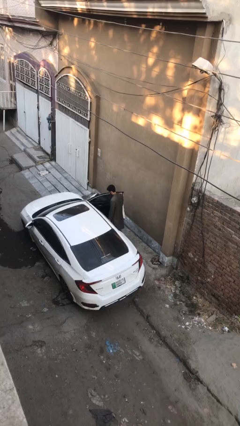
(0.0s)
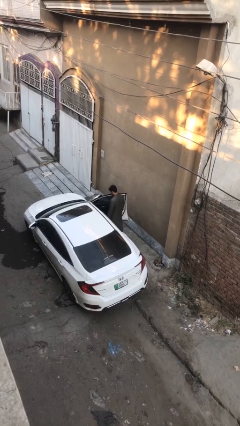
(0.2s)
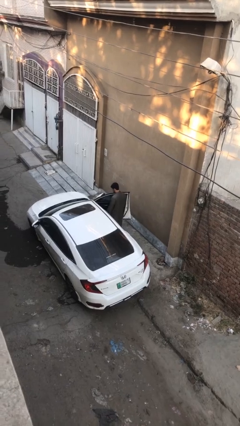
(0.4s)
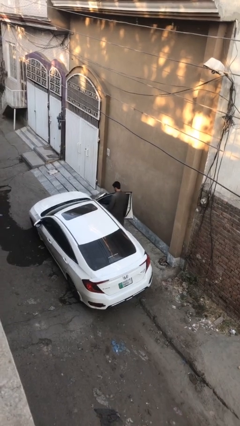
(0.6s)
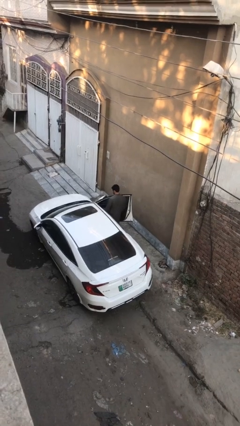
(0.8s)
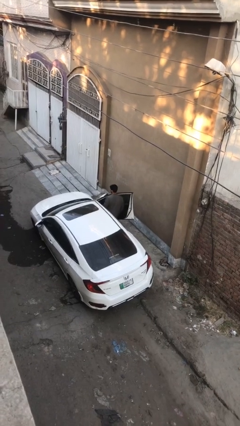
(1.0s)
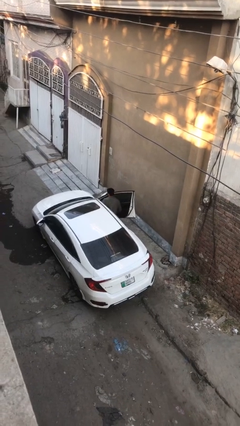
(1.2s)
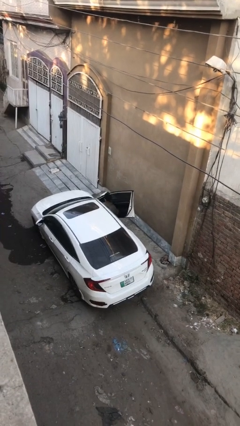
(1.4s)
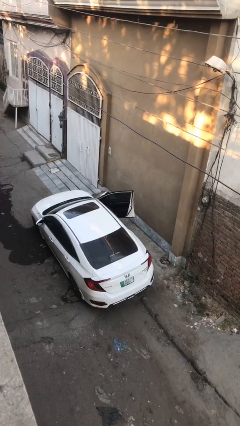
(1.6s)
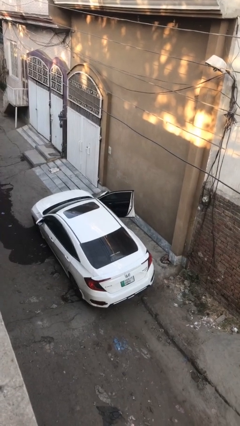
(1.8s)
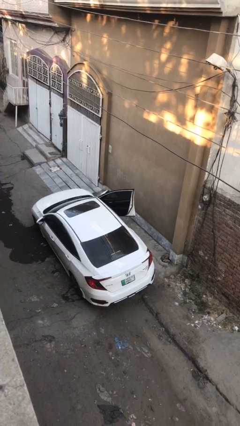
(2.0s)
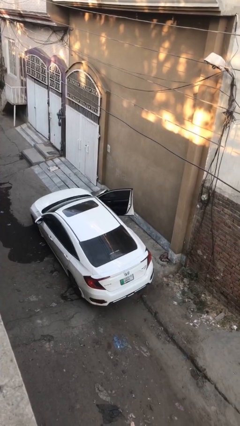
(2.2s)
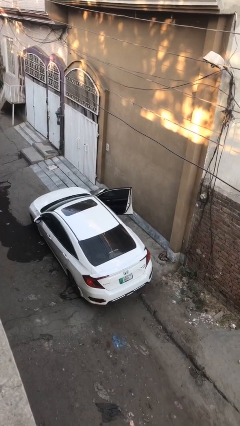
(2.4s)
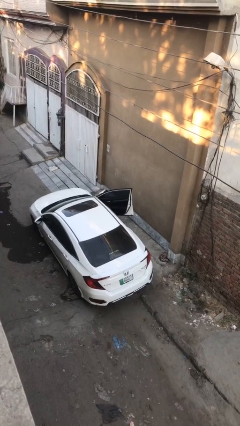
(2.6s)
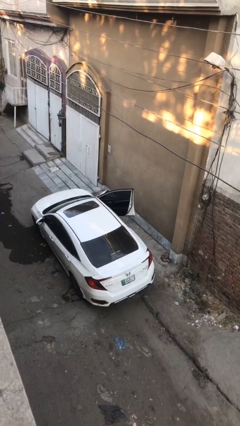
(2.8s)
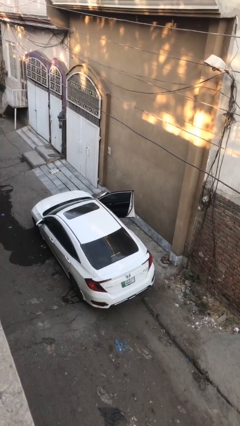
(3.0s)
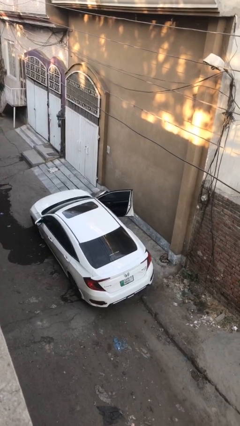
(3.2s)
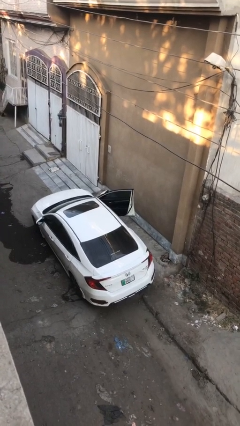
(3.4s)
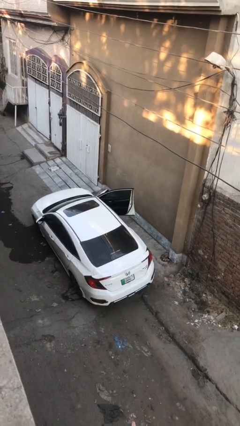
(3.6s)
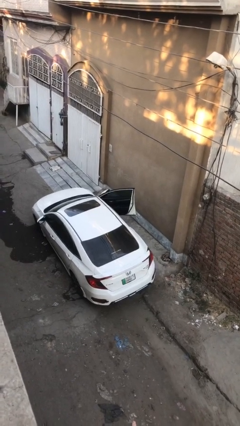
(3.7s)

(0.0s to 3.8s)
person enters car

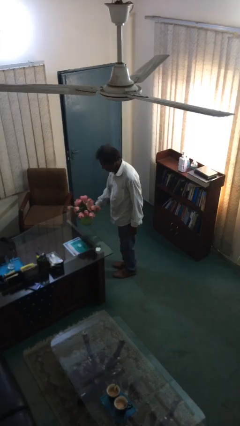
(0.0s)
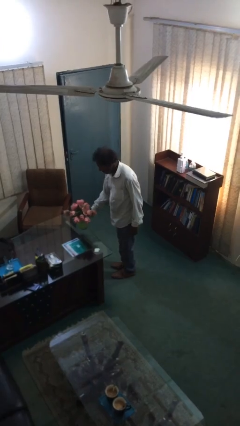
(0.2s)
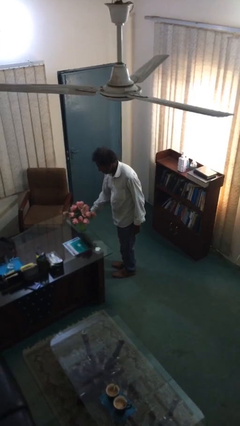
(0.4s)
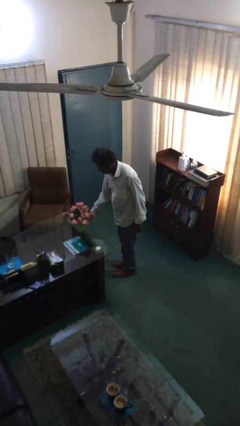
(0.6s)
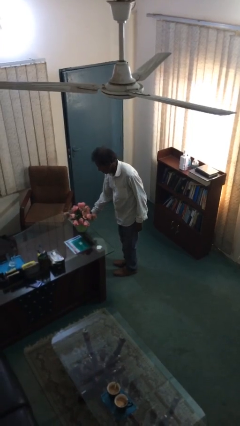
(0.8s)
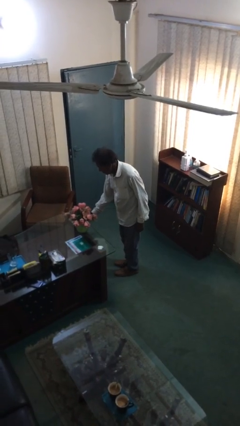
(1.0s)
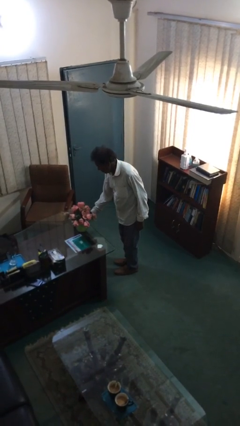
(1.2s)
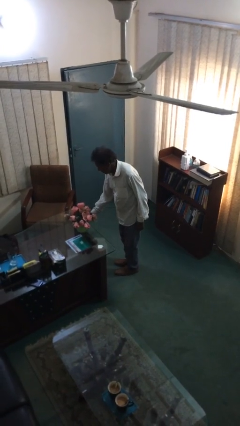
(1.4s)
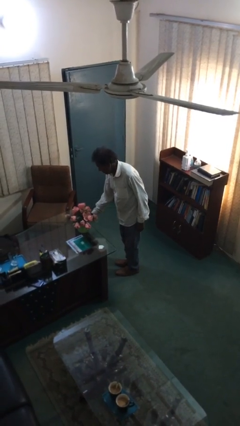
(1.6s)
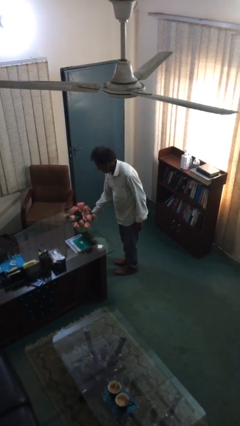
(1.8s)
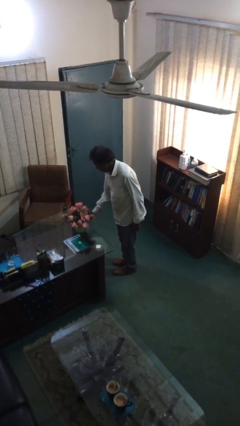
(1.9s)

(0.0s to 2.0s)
person puts down object on table

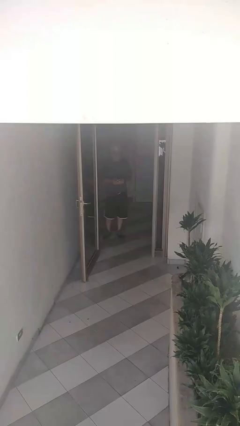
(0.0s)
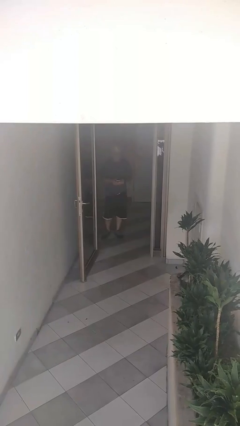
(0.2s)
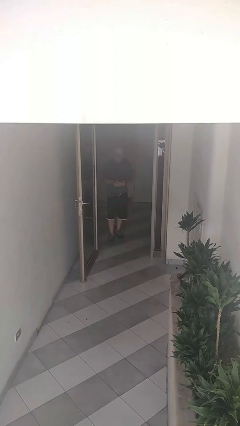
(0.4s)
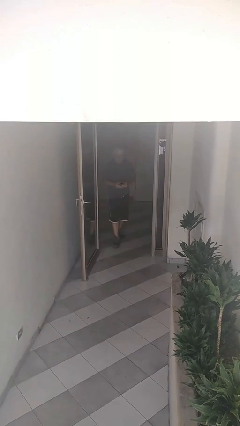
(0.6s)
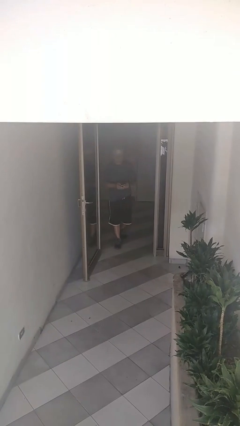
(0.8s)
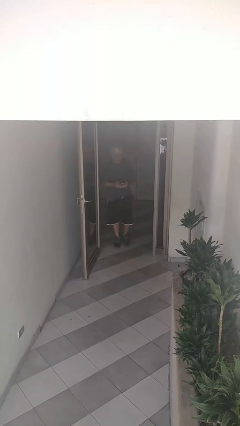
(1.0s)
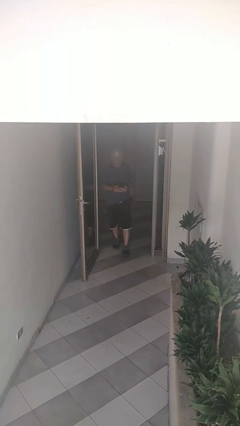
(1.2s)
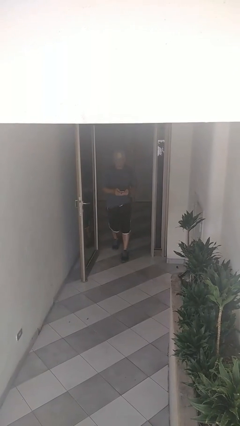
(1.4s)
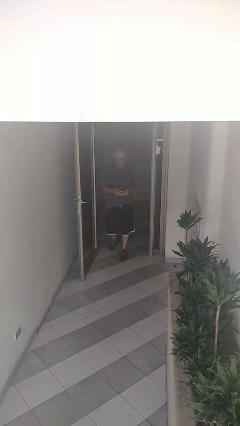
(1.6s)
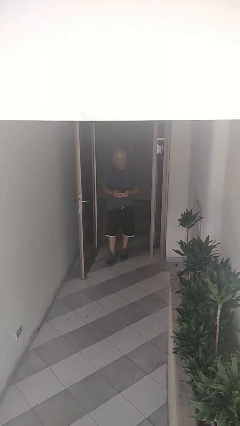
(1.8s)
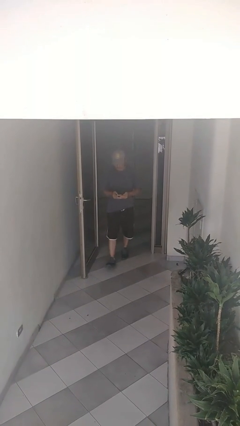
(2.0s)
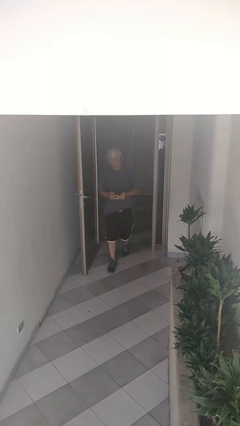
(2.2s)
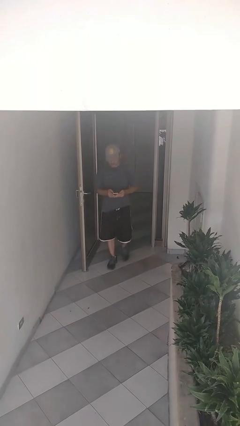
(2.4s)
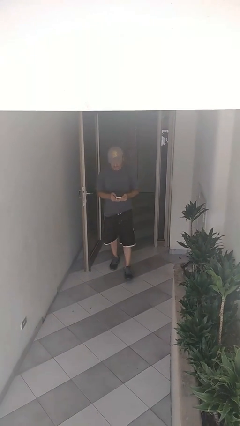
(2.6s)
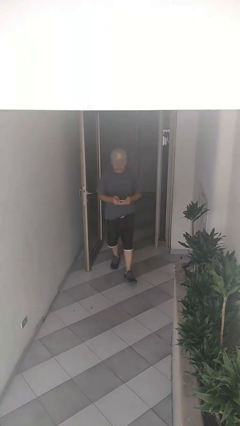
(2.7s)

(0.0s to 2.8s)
person enters scene through structure

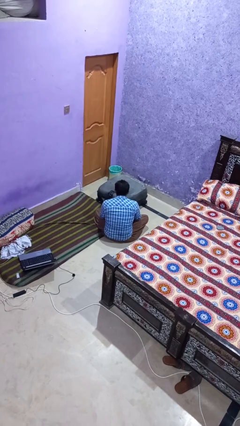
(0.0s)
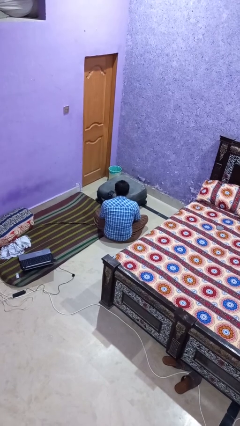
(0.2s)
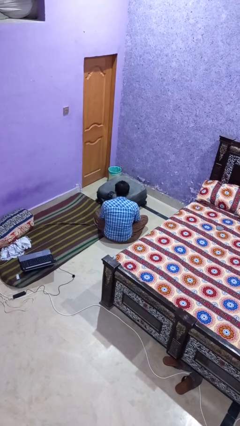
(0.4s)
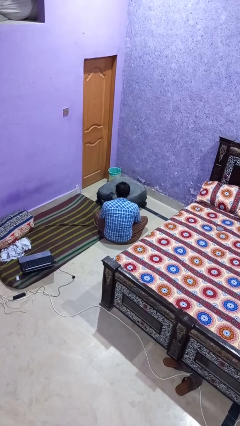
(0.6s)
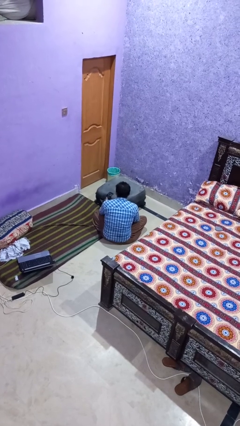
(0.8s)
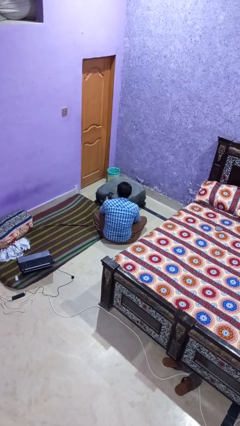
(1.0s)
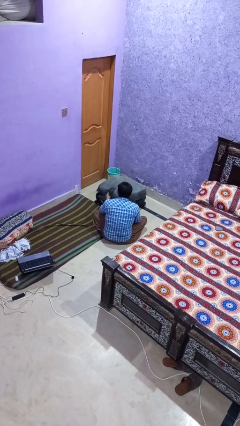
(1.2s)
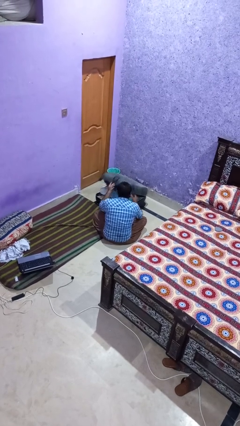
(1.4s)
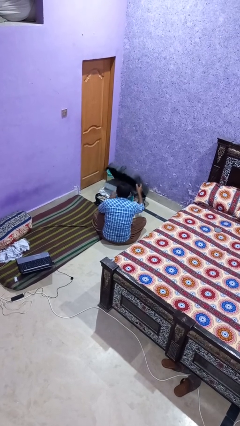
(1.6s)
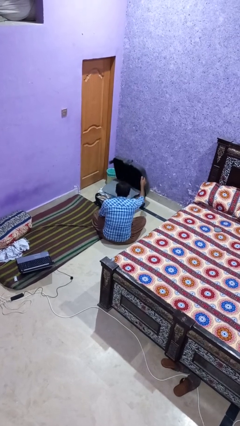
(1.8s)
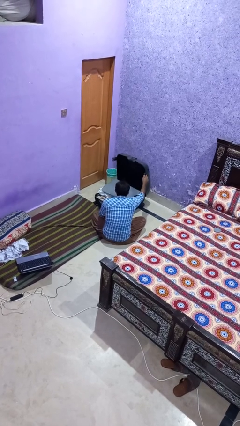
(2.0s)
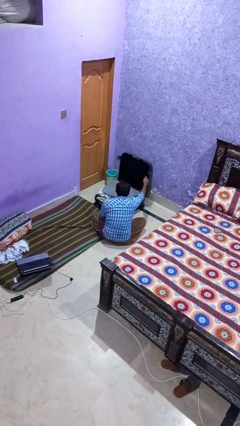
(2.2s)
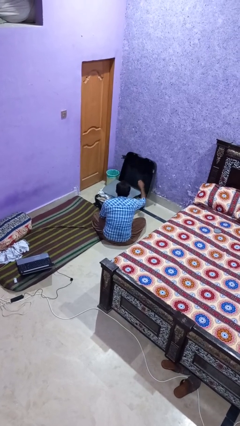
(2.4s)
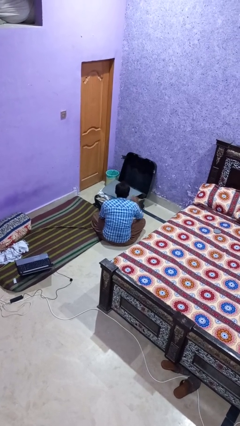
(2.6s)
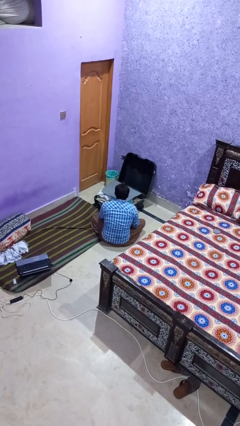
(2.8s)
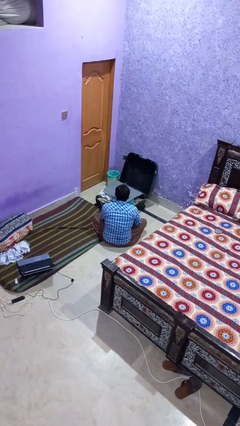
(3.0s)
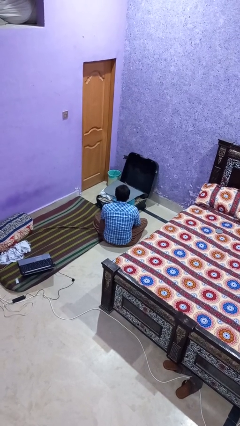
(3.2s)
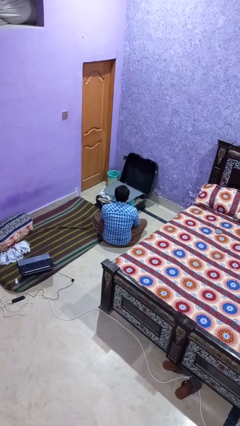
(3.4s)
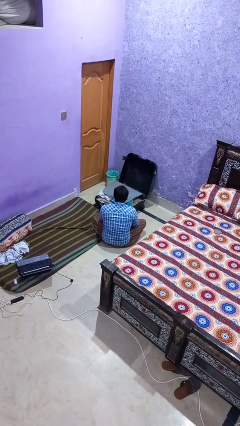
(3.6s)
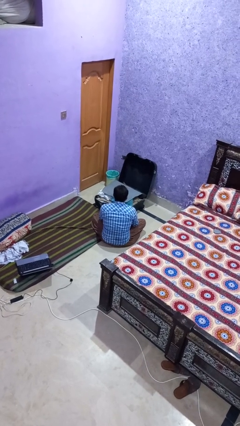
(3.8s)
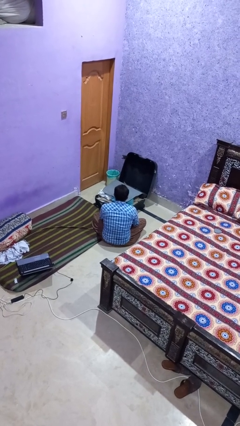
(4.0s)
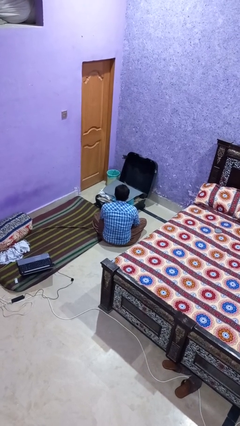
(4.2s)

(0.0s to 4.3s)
person opens suitcase

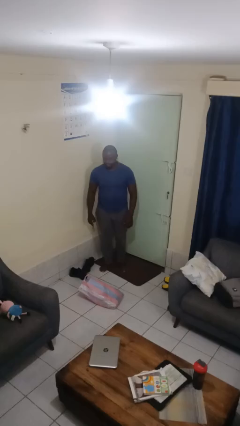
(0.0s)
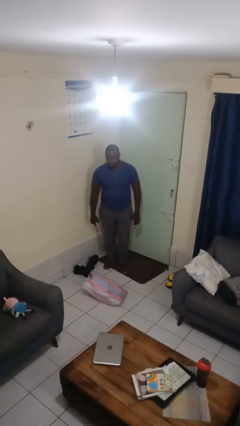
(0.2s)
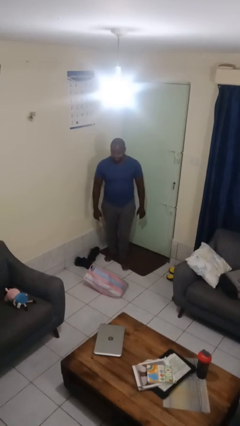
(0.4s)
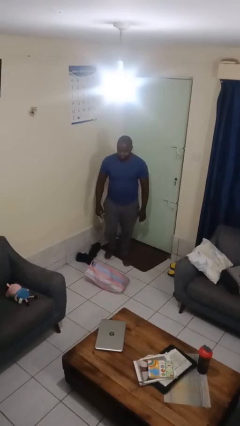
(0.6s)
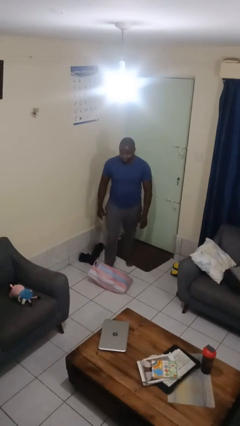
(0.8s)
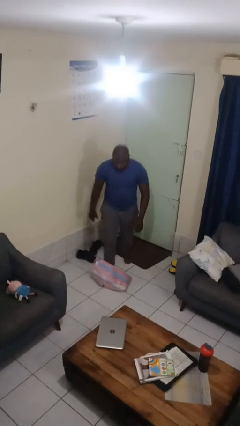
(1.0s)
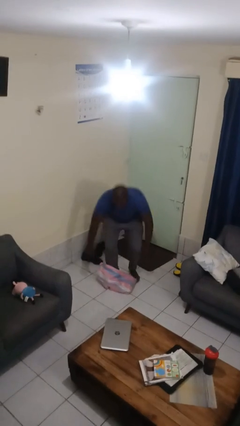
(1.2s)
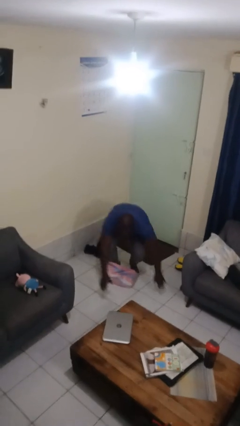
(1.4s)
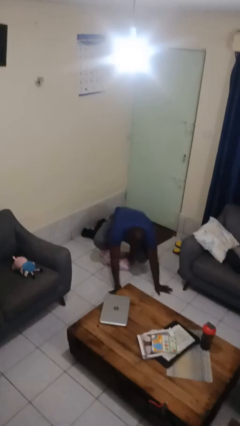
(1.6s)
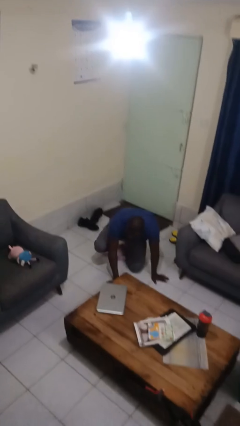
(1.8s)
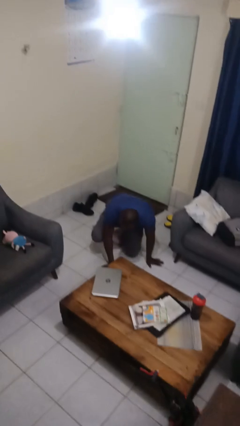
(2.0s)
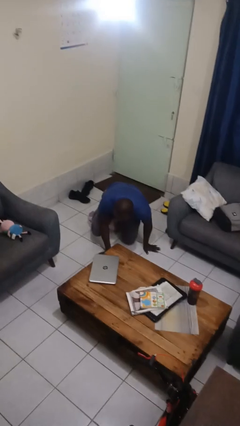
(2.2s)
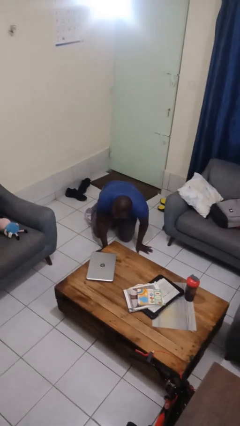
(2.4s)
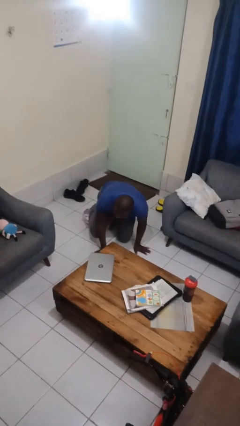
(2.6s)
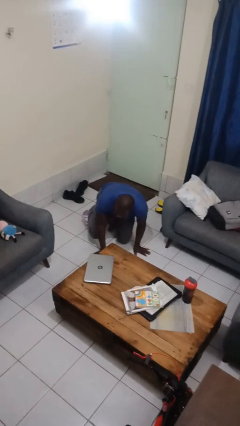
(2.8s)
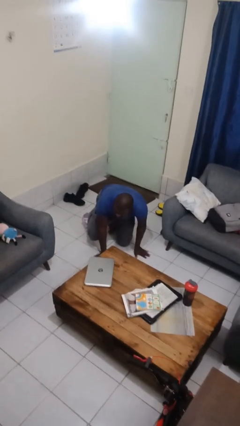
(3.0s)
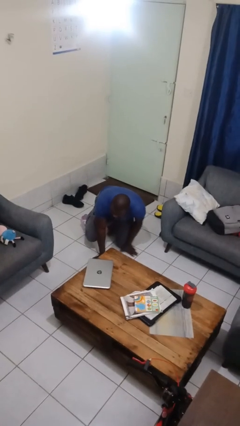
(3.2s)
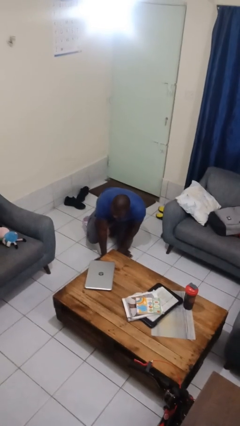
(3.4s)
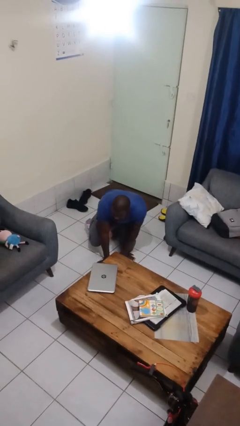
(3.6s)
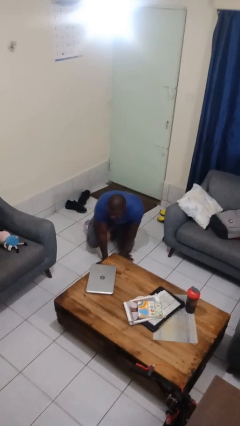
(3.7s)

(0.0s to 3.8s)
person trips on object on floor

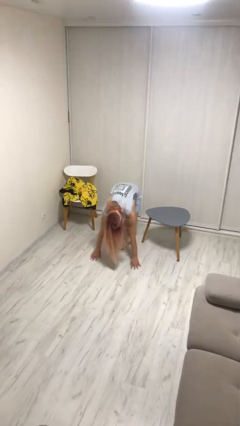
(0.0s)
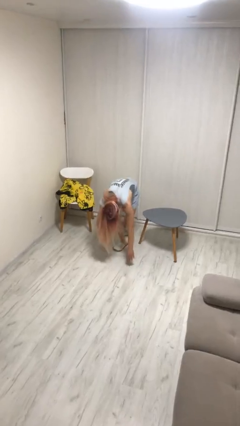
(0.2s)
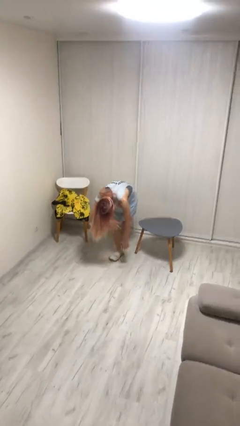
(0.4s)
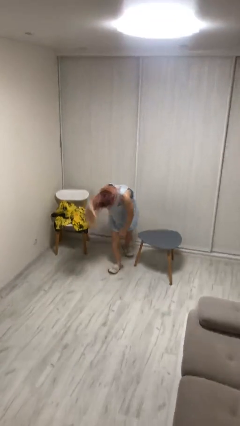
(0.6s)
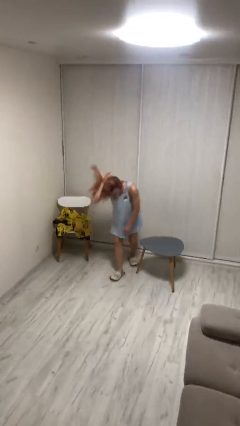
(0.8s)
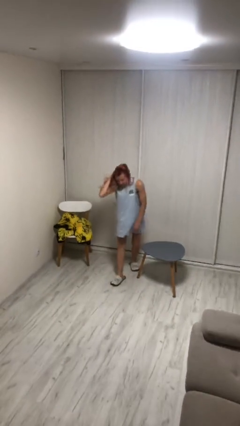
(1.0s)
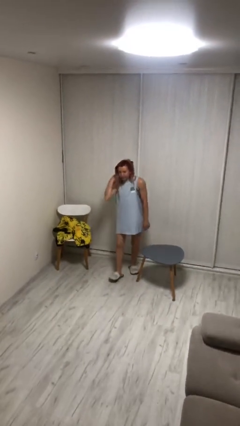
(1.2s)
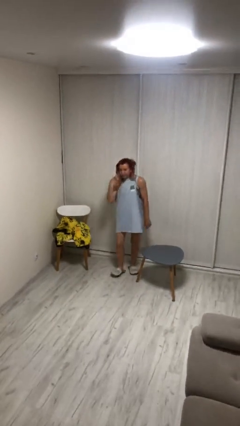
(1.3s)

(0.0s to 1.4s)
person stands up from floor
